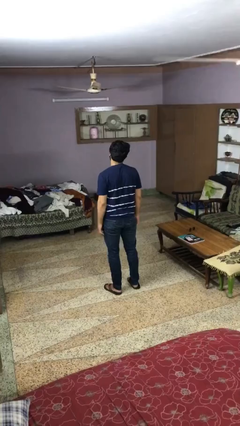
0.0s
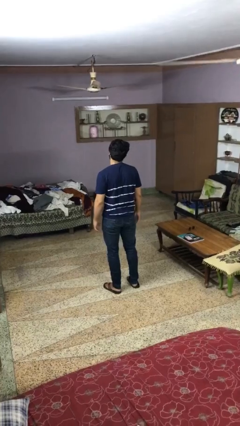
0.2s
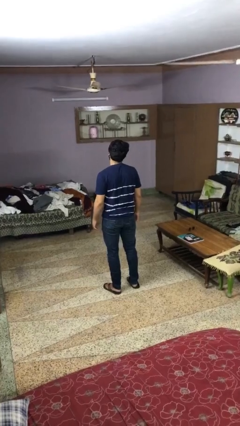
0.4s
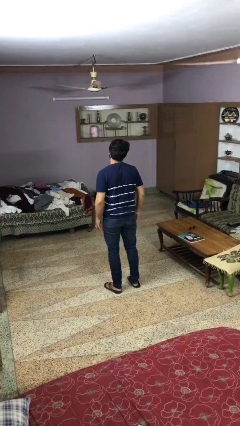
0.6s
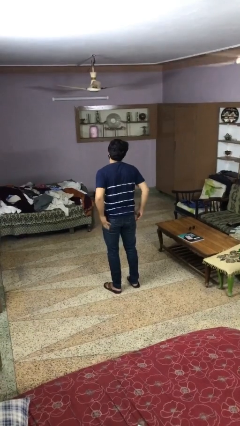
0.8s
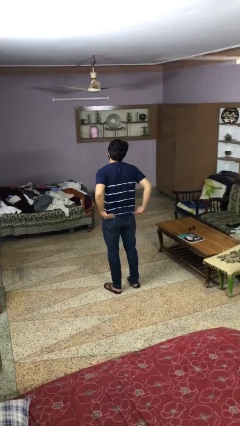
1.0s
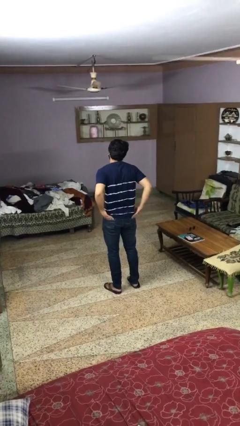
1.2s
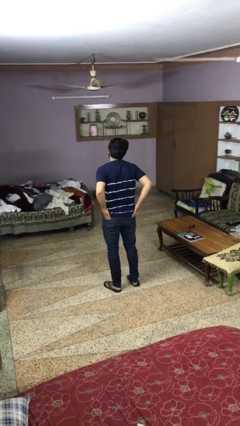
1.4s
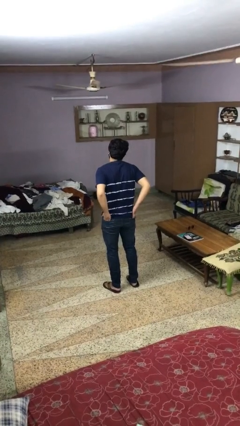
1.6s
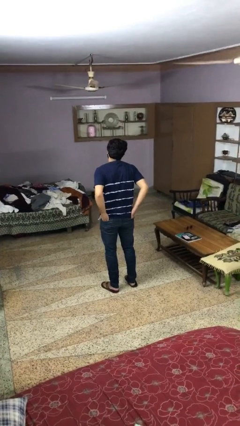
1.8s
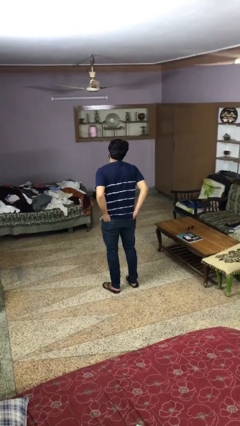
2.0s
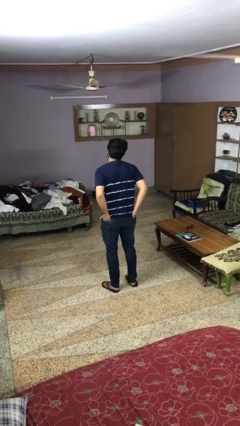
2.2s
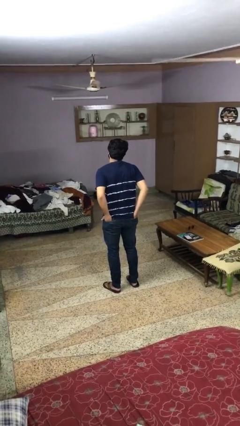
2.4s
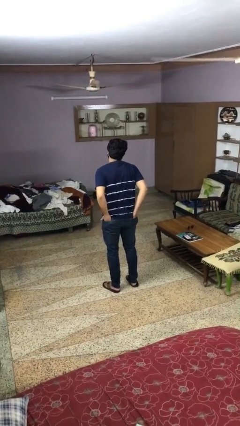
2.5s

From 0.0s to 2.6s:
person puts hands in back pockets

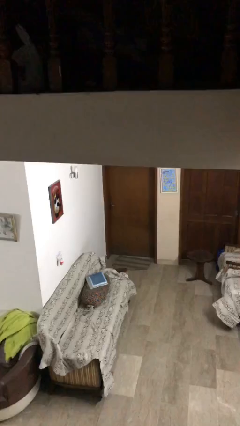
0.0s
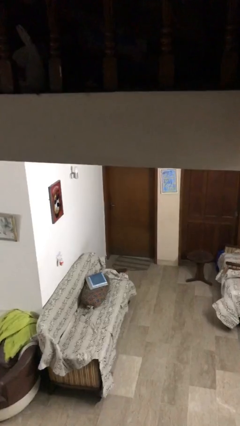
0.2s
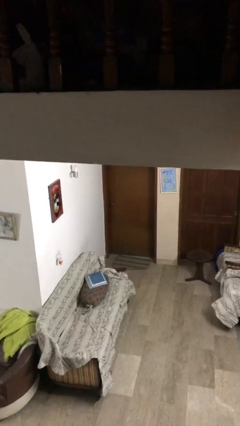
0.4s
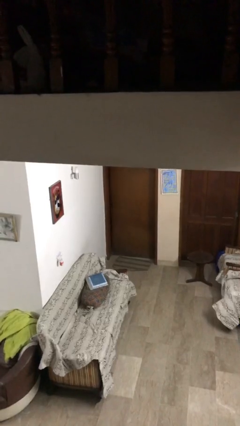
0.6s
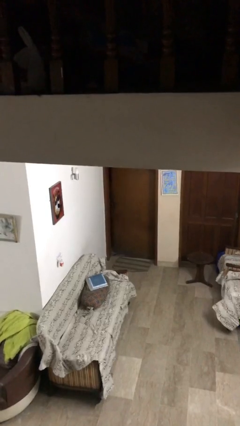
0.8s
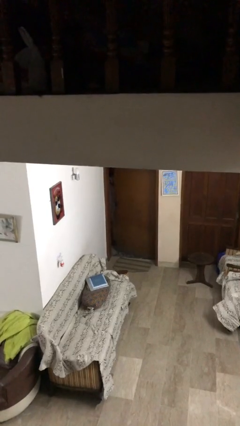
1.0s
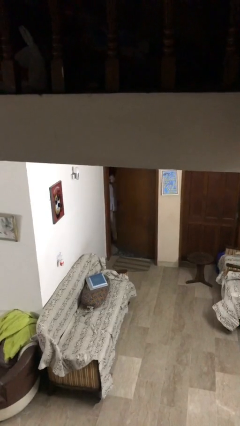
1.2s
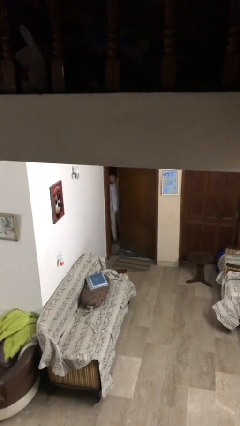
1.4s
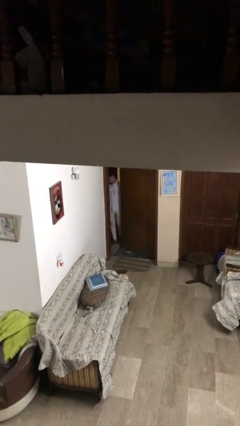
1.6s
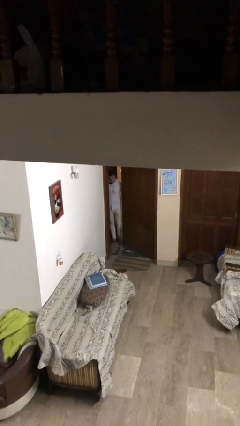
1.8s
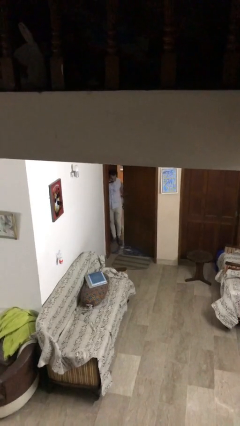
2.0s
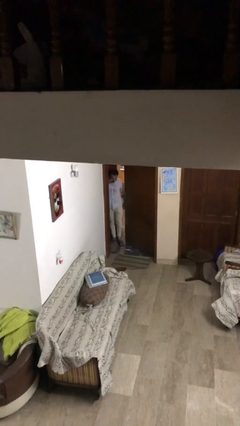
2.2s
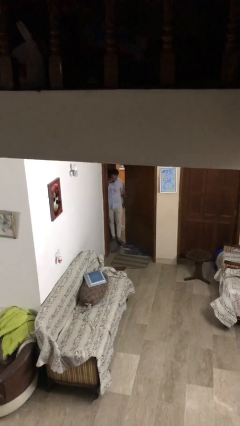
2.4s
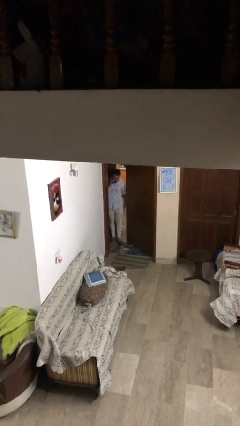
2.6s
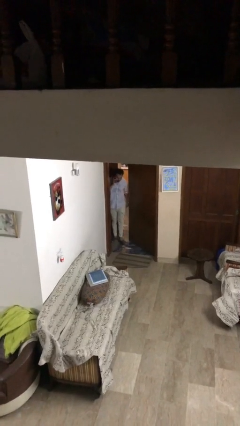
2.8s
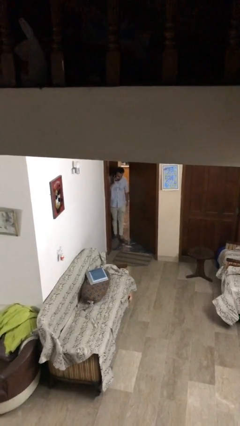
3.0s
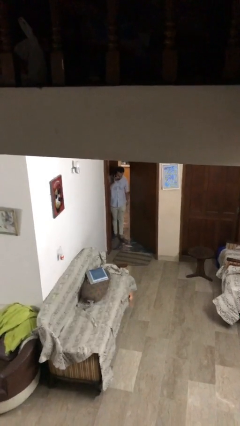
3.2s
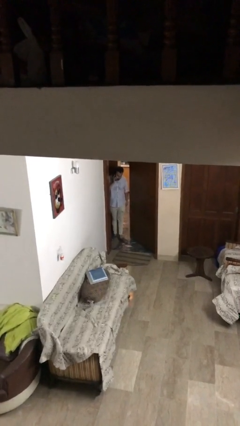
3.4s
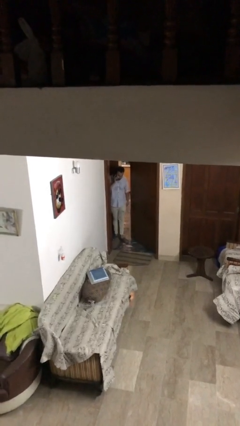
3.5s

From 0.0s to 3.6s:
person opens facility door

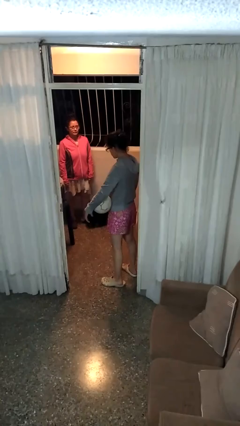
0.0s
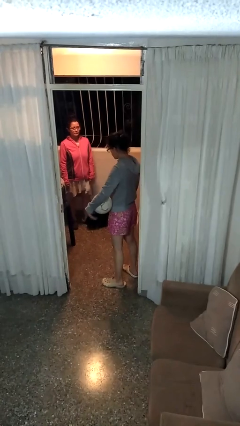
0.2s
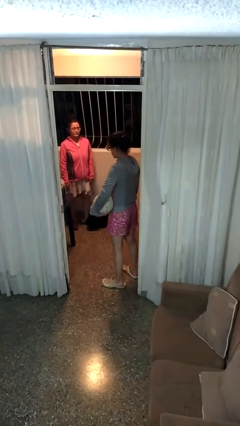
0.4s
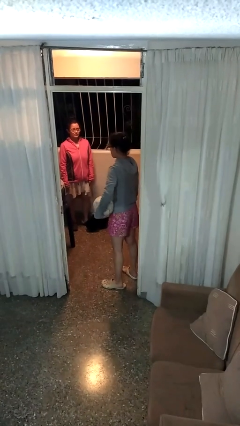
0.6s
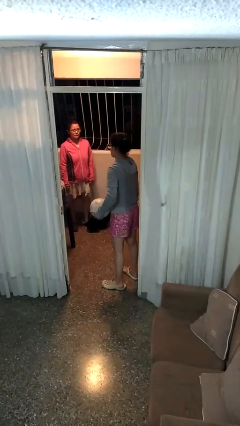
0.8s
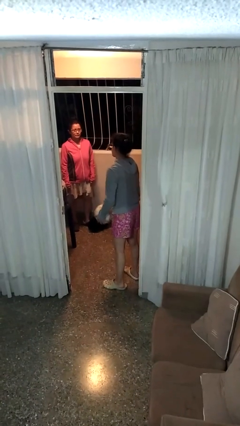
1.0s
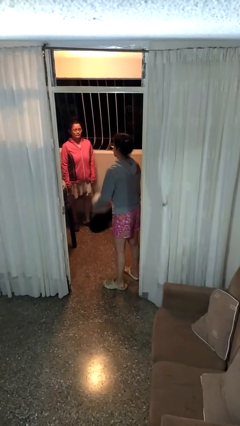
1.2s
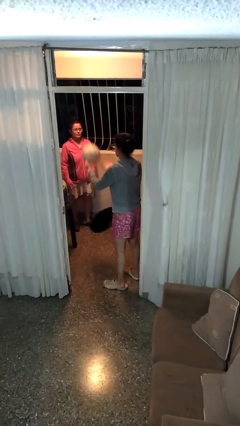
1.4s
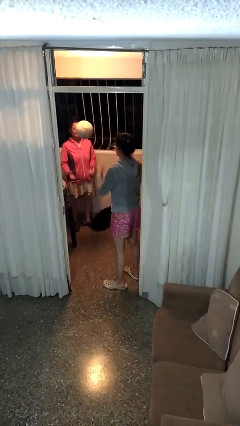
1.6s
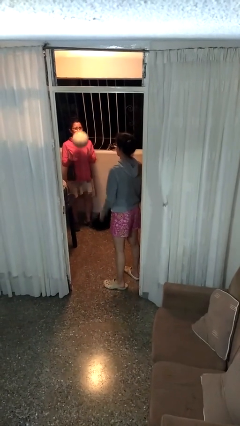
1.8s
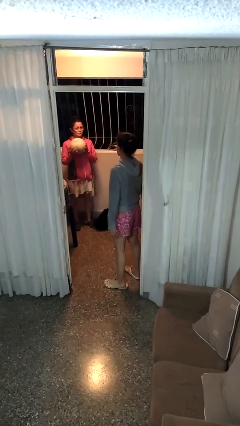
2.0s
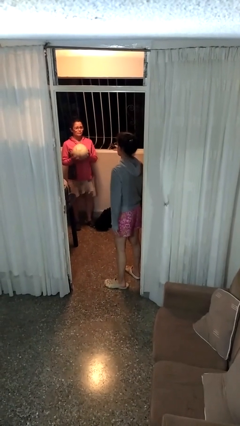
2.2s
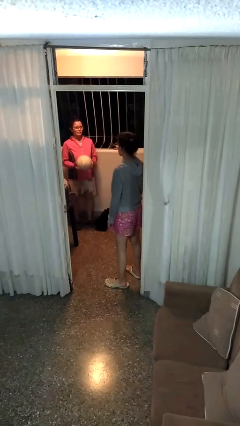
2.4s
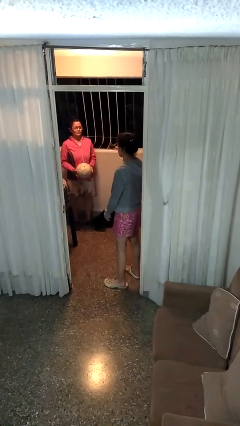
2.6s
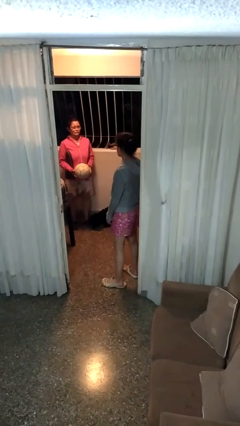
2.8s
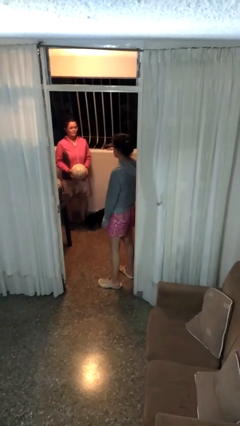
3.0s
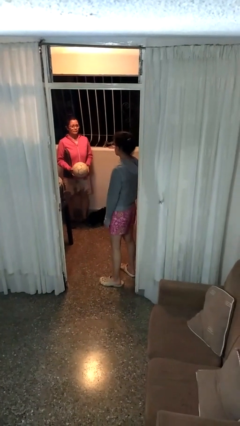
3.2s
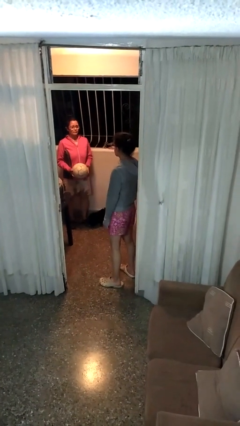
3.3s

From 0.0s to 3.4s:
person throws object to person

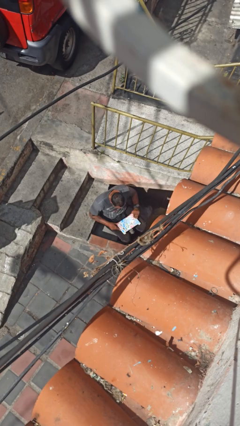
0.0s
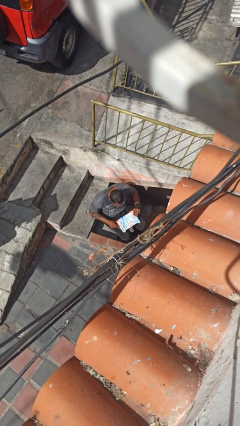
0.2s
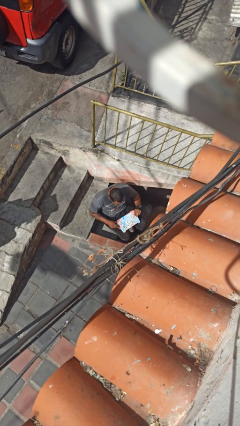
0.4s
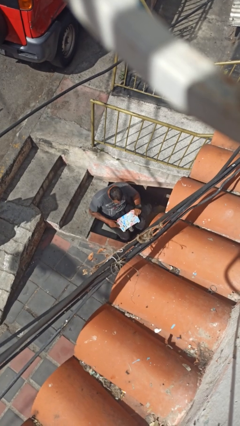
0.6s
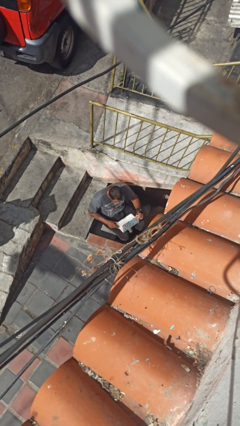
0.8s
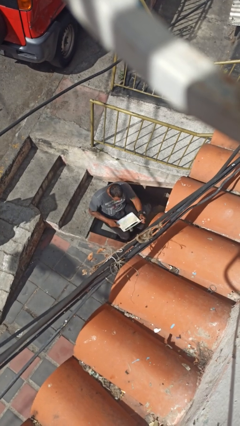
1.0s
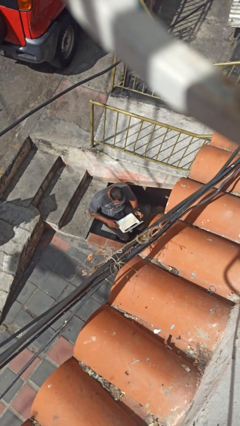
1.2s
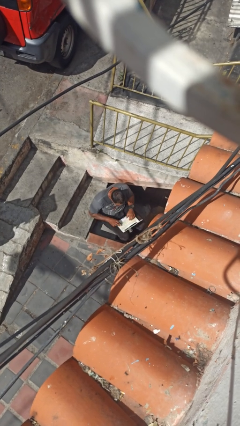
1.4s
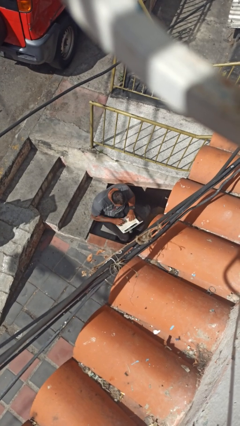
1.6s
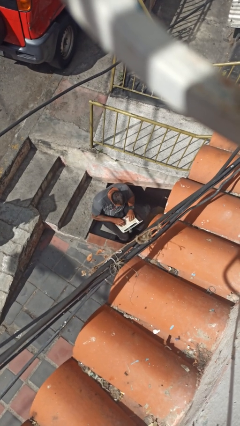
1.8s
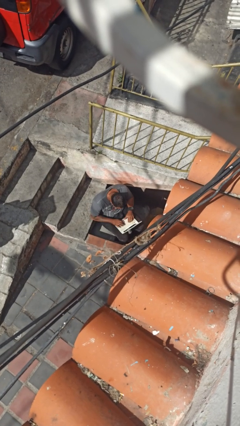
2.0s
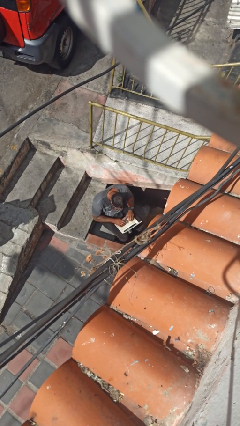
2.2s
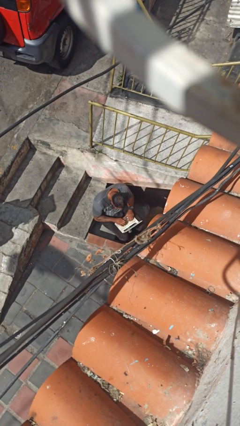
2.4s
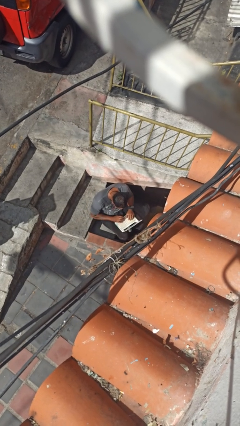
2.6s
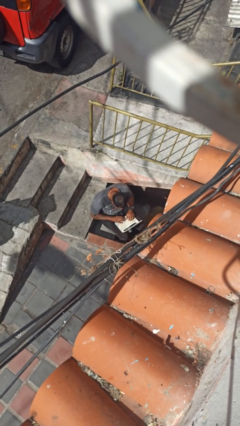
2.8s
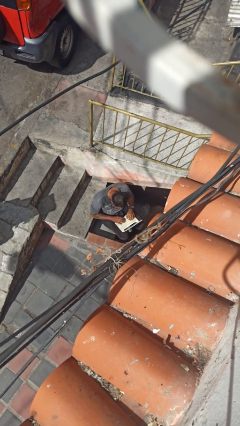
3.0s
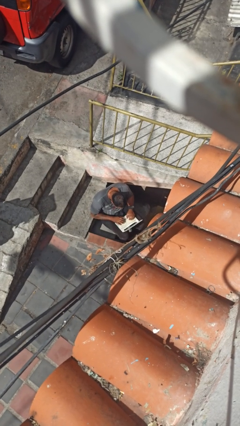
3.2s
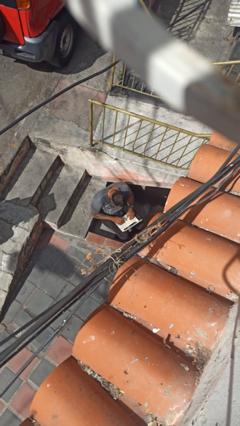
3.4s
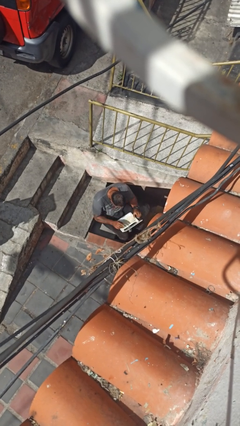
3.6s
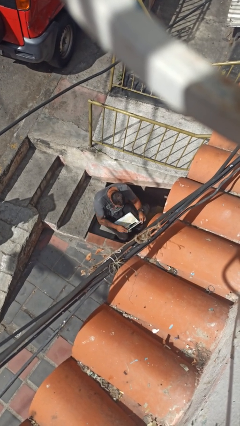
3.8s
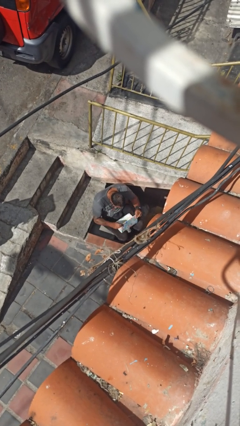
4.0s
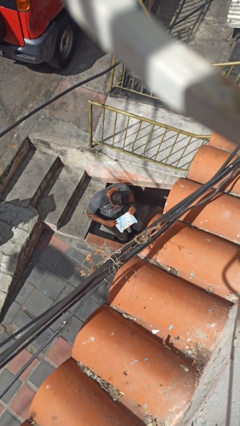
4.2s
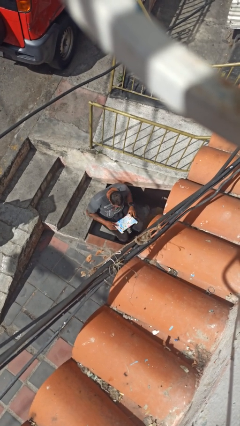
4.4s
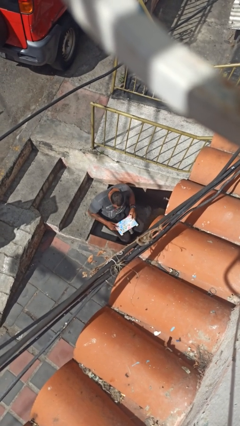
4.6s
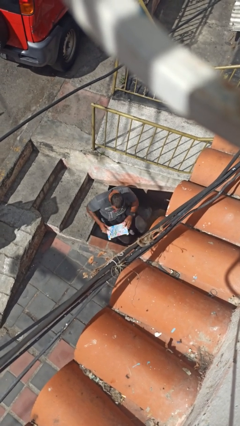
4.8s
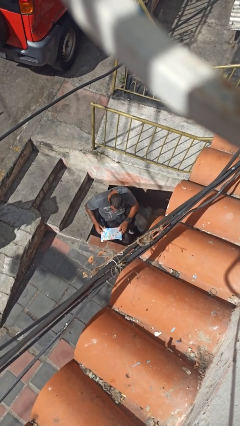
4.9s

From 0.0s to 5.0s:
person interacts with laptop

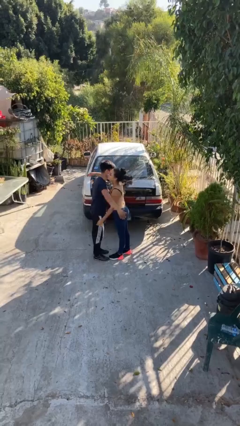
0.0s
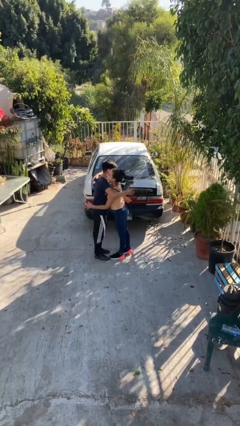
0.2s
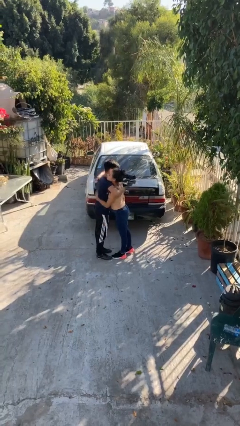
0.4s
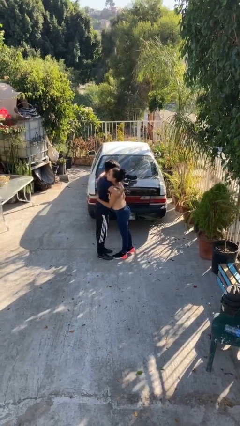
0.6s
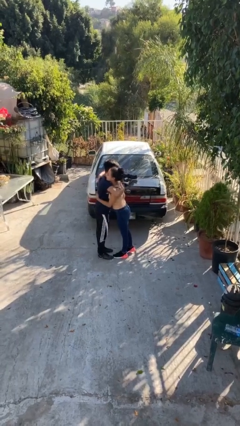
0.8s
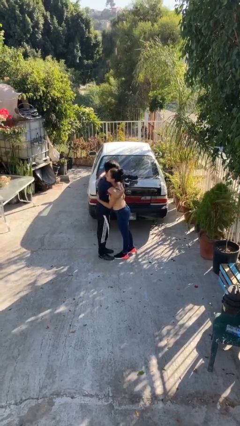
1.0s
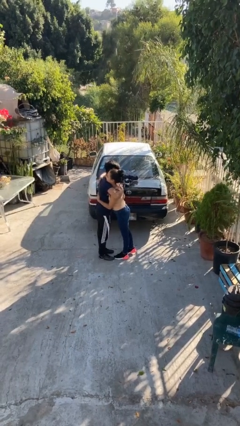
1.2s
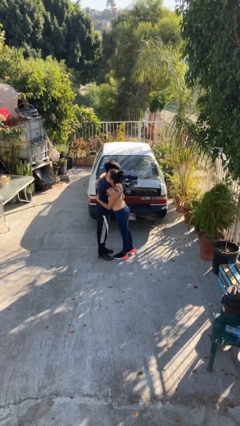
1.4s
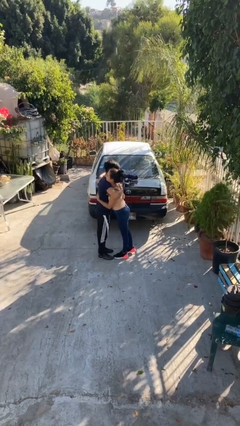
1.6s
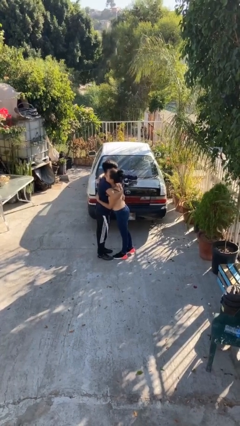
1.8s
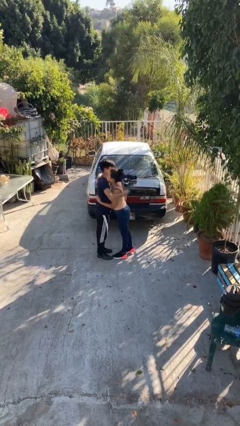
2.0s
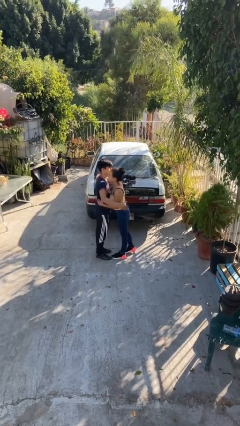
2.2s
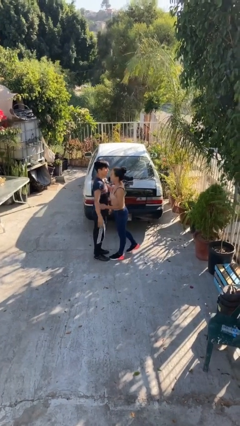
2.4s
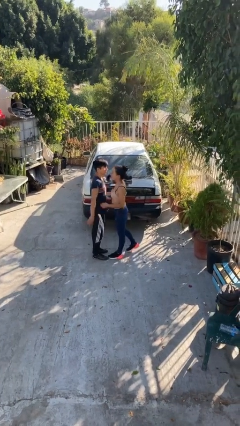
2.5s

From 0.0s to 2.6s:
person embraces person

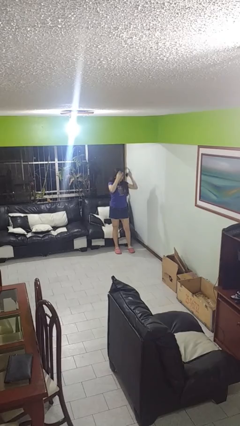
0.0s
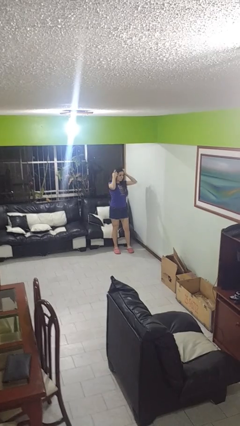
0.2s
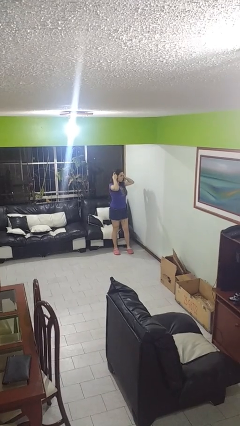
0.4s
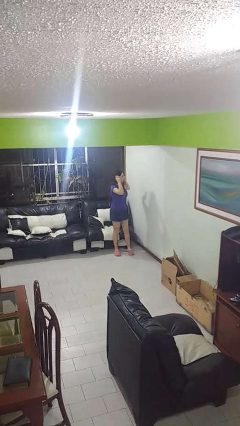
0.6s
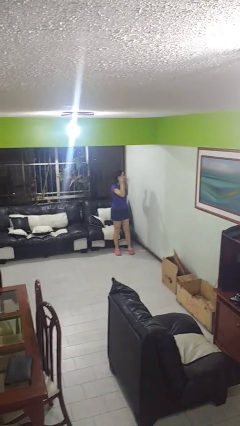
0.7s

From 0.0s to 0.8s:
person puts on headphones
